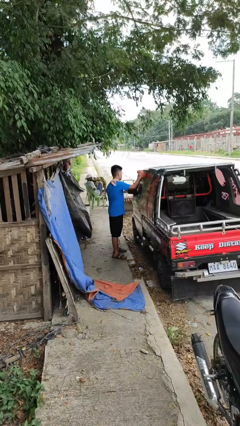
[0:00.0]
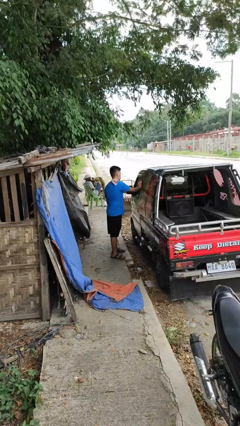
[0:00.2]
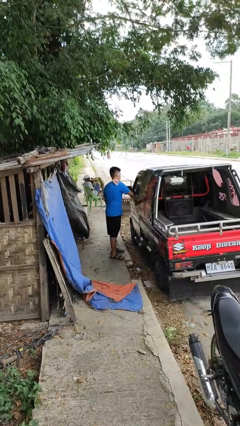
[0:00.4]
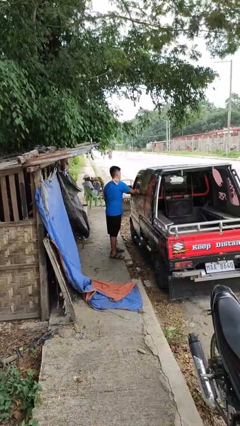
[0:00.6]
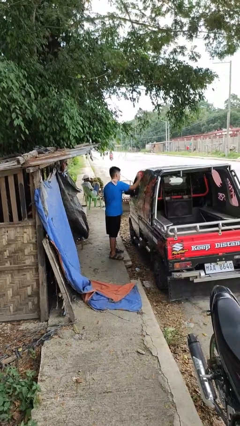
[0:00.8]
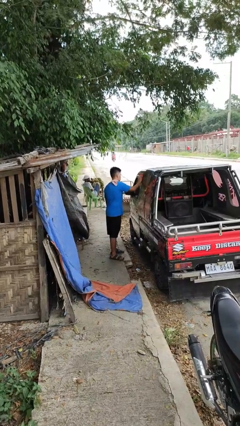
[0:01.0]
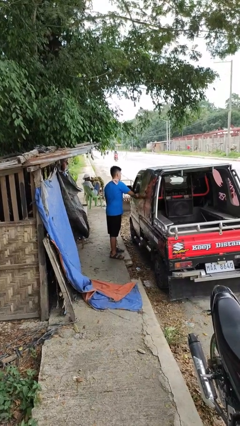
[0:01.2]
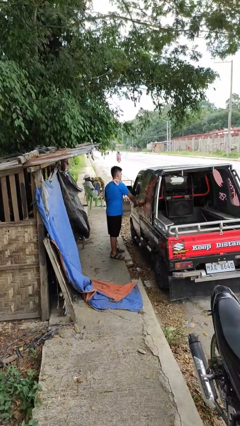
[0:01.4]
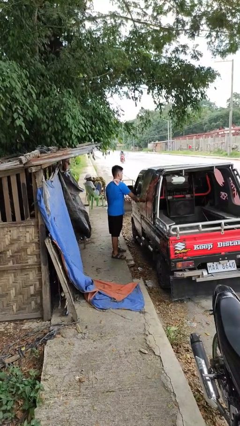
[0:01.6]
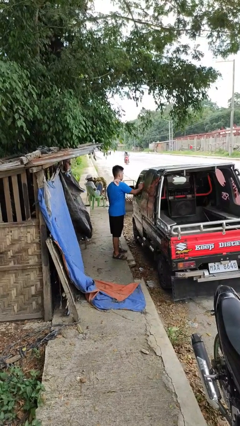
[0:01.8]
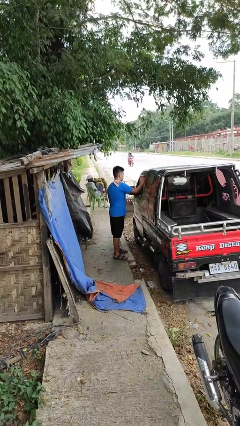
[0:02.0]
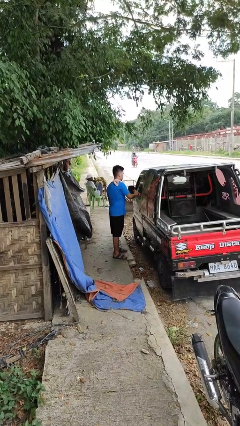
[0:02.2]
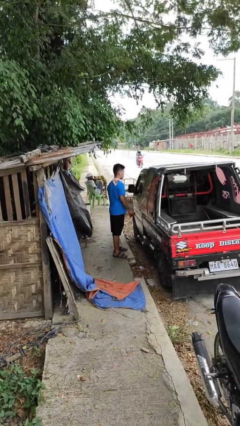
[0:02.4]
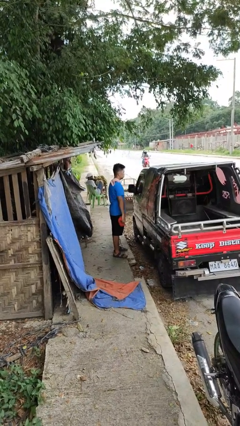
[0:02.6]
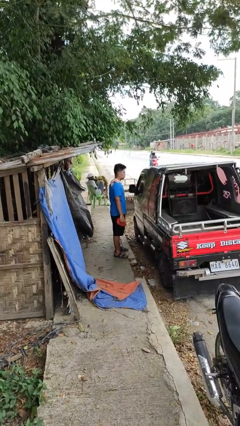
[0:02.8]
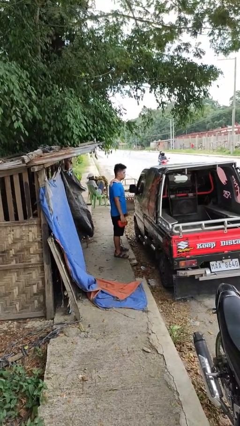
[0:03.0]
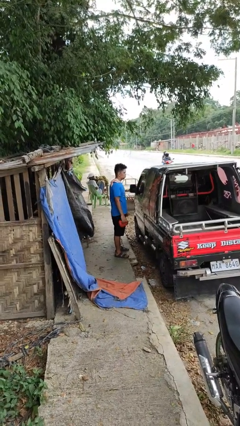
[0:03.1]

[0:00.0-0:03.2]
person polishes car with rag

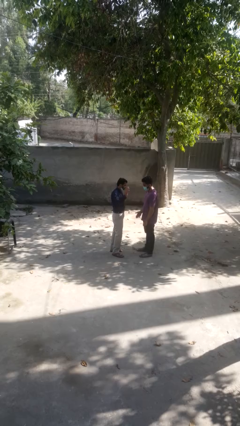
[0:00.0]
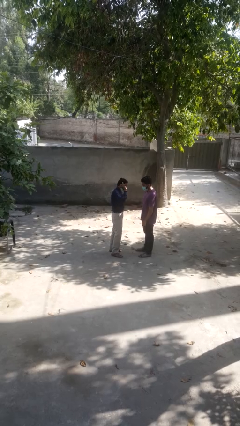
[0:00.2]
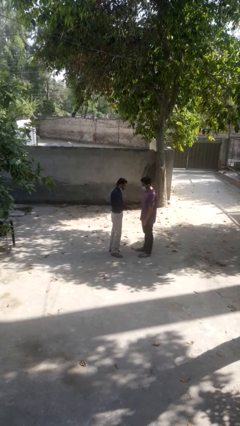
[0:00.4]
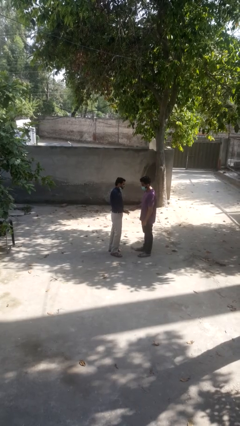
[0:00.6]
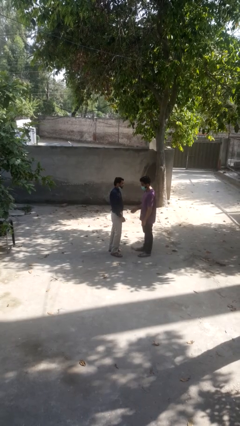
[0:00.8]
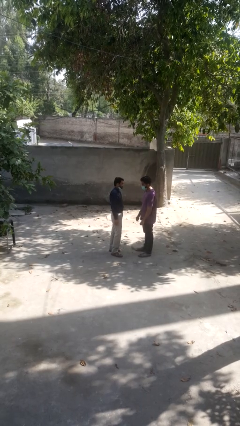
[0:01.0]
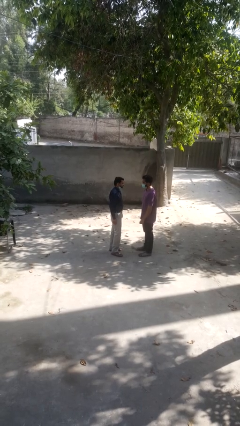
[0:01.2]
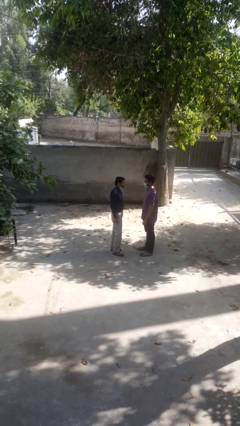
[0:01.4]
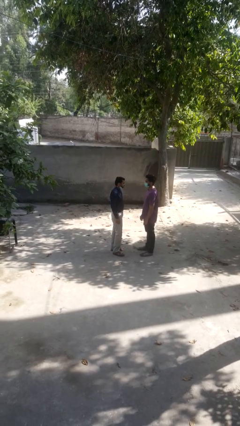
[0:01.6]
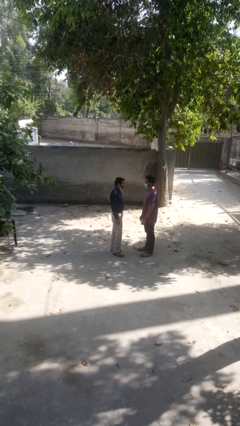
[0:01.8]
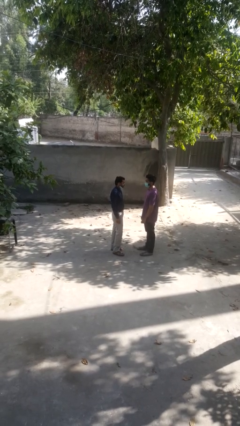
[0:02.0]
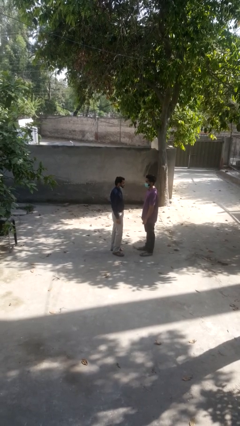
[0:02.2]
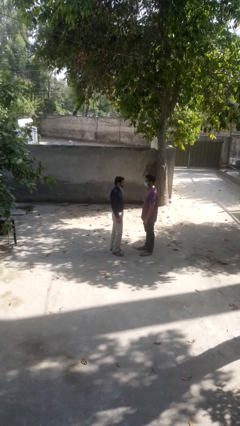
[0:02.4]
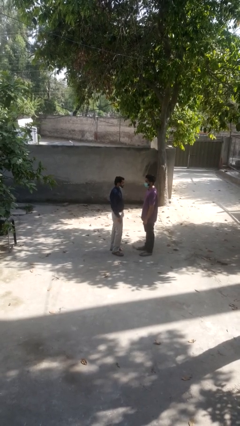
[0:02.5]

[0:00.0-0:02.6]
person highfives hand

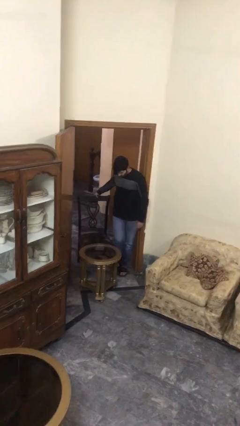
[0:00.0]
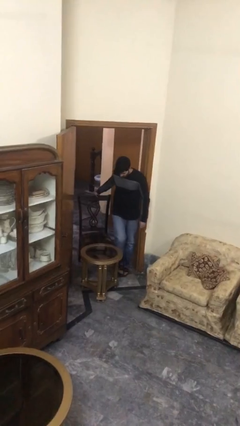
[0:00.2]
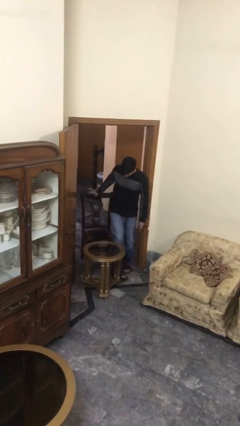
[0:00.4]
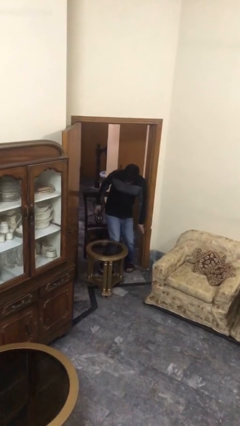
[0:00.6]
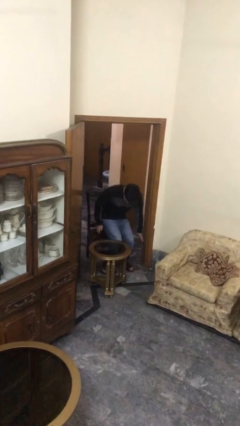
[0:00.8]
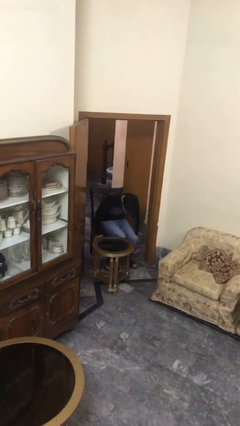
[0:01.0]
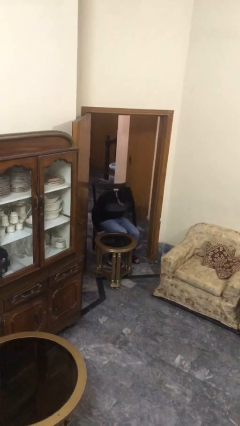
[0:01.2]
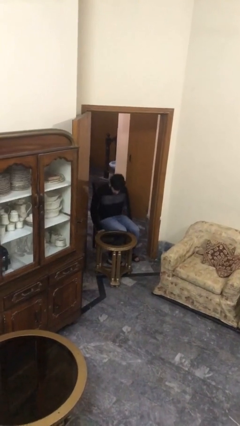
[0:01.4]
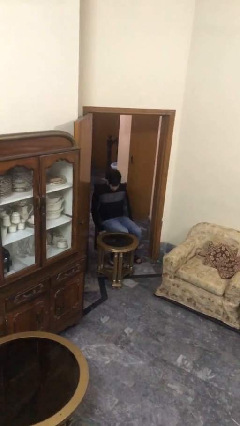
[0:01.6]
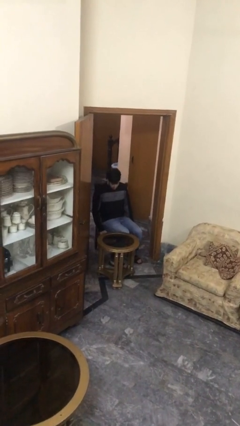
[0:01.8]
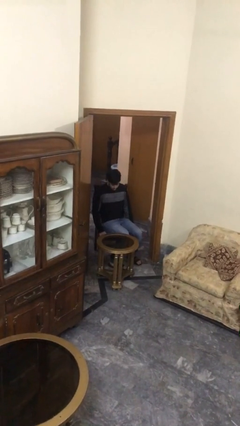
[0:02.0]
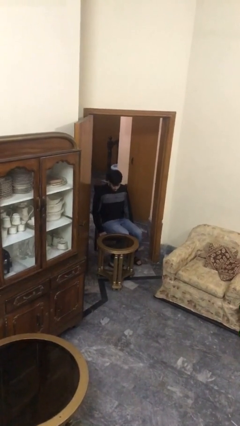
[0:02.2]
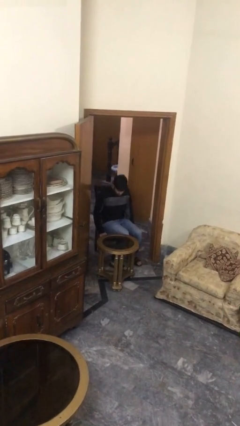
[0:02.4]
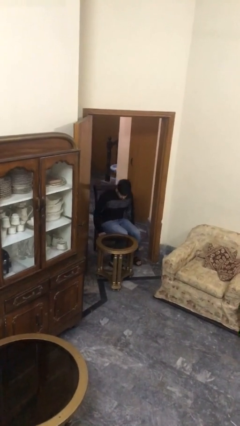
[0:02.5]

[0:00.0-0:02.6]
person sits down

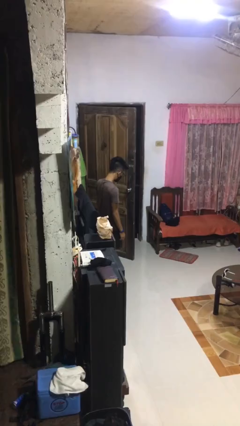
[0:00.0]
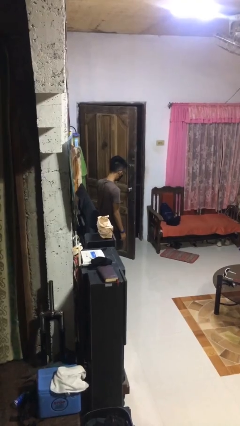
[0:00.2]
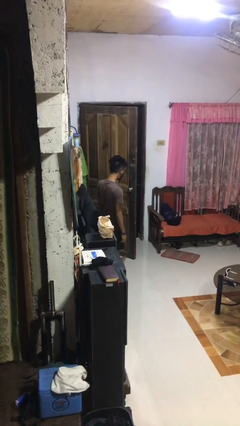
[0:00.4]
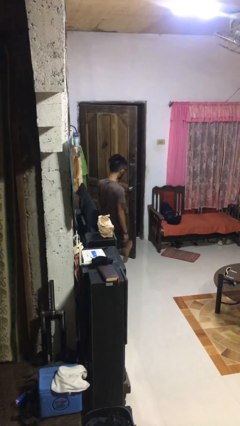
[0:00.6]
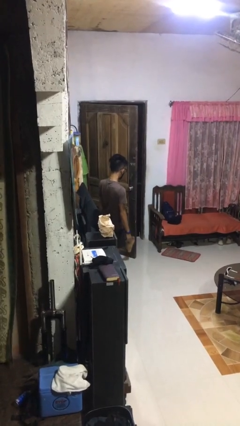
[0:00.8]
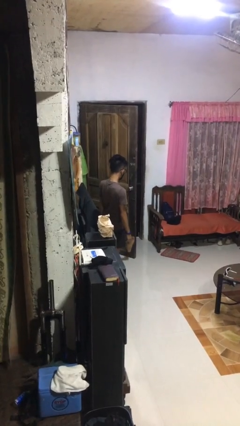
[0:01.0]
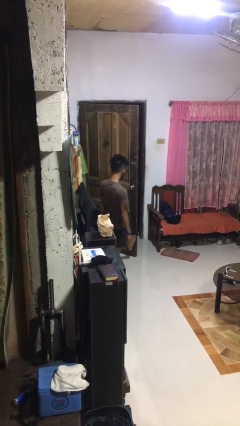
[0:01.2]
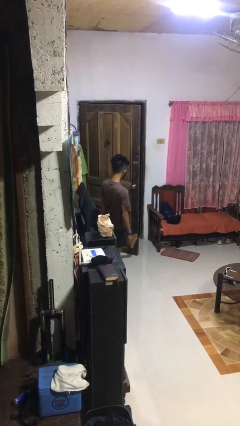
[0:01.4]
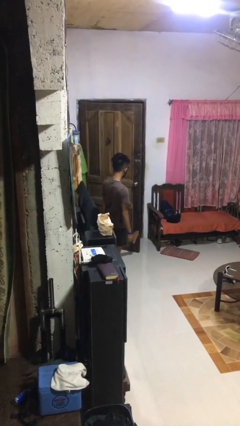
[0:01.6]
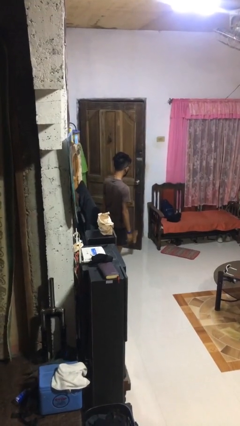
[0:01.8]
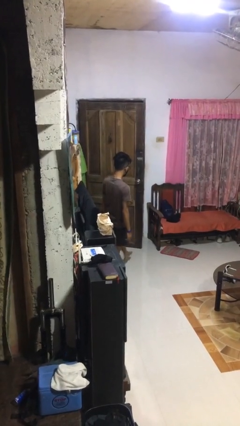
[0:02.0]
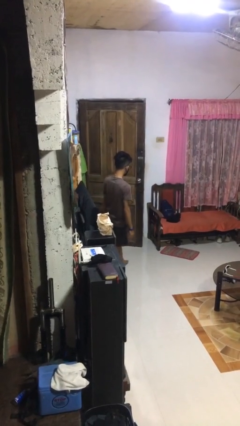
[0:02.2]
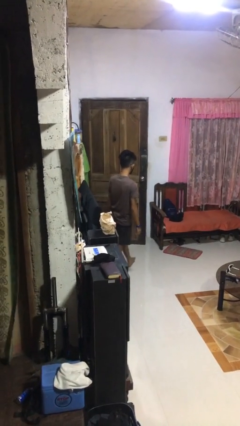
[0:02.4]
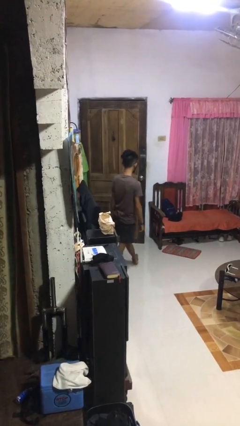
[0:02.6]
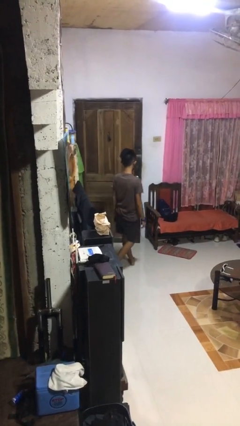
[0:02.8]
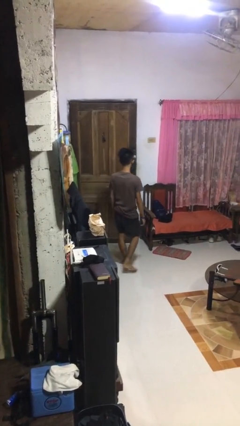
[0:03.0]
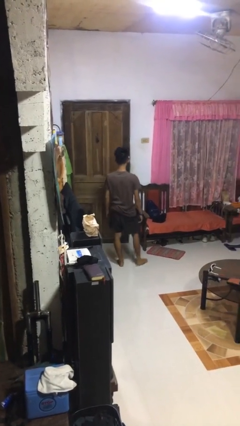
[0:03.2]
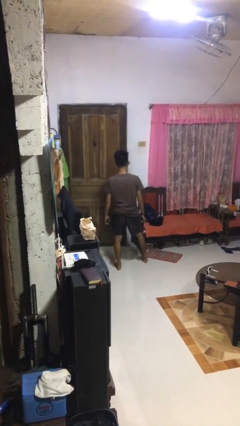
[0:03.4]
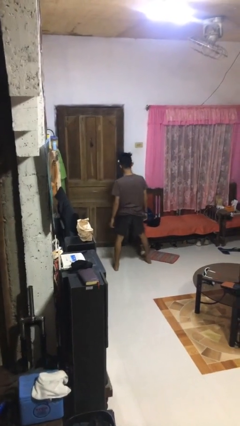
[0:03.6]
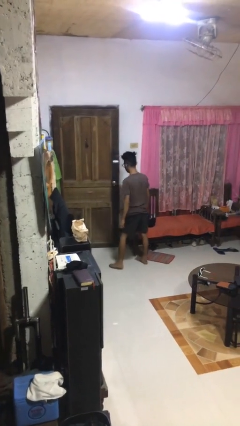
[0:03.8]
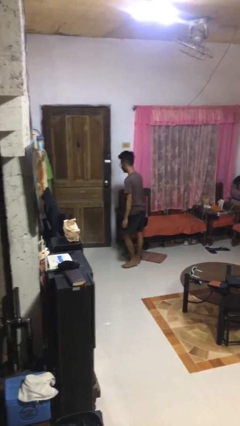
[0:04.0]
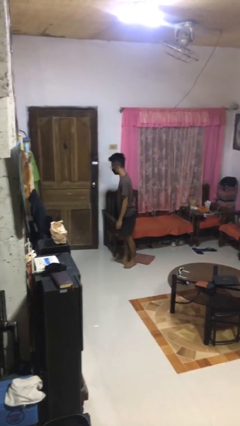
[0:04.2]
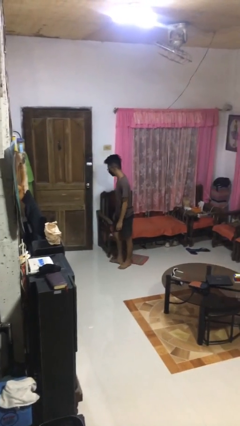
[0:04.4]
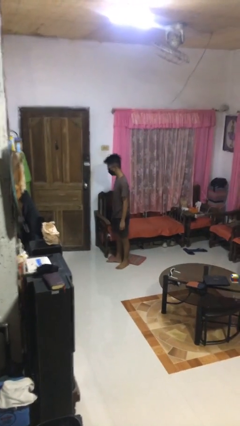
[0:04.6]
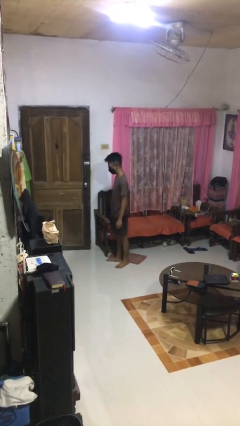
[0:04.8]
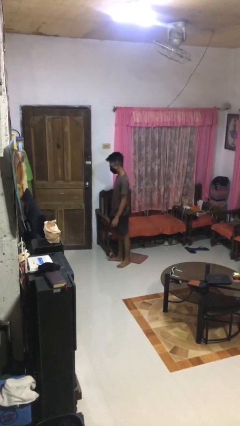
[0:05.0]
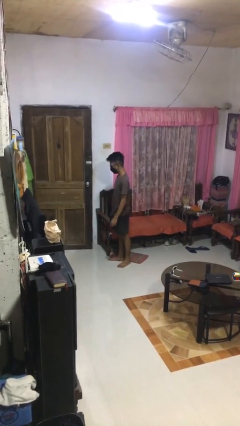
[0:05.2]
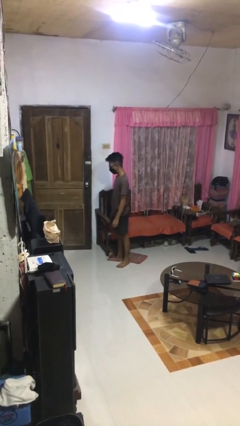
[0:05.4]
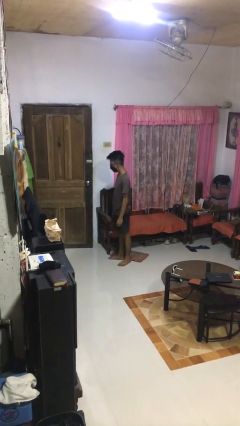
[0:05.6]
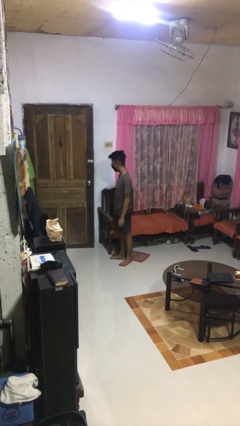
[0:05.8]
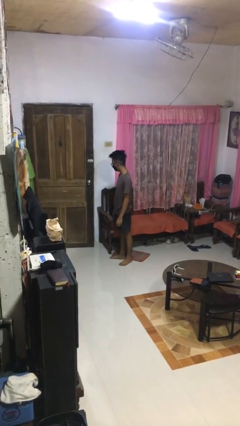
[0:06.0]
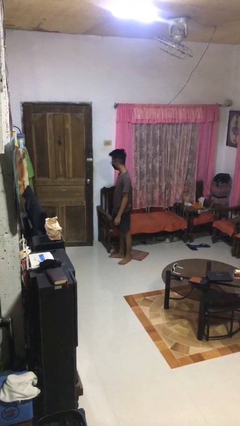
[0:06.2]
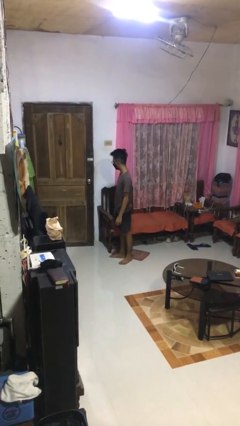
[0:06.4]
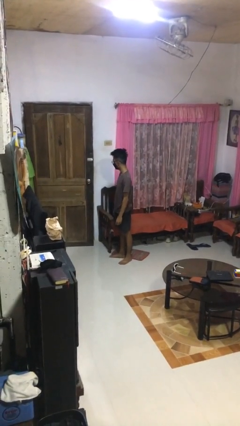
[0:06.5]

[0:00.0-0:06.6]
person closes door with foot

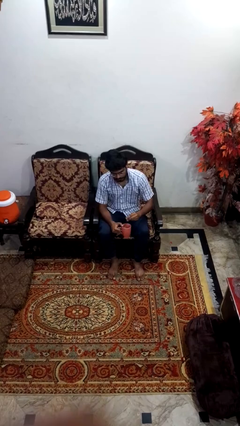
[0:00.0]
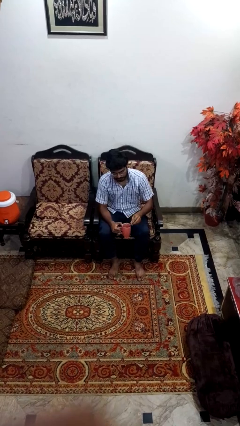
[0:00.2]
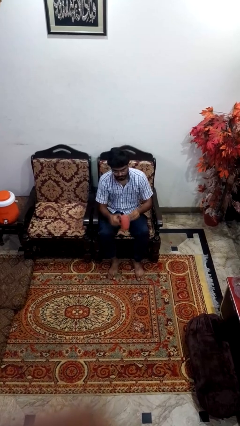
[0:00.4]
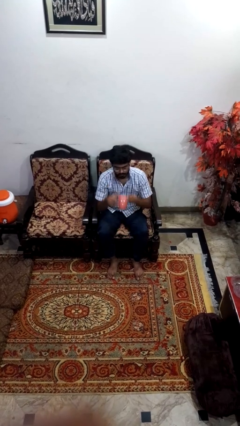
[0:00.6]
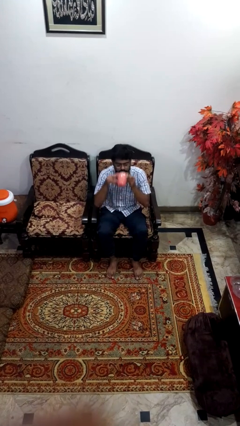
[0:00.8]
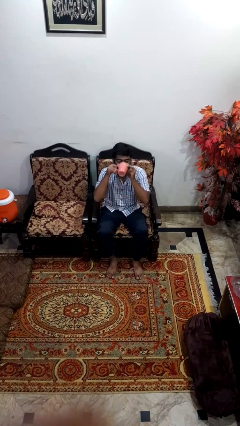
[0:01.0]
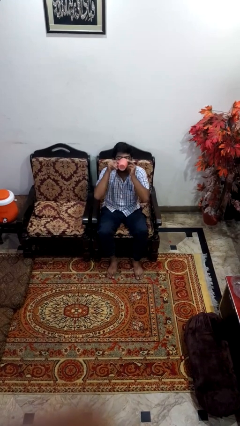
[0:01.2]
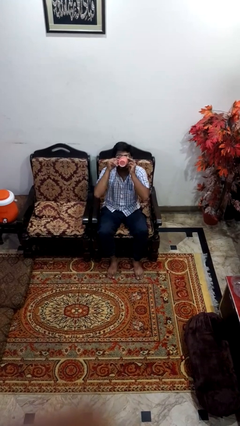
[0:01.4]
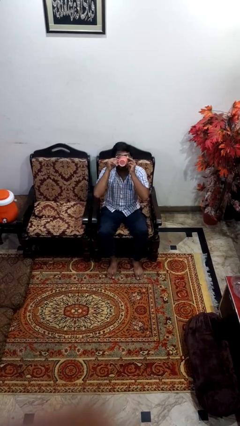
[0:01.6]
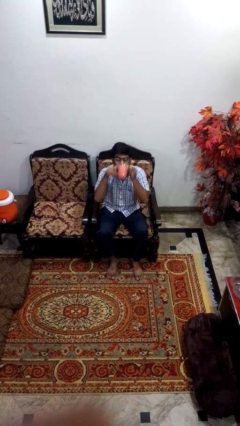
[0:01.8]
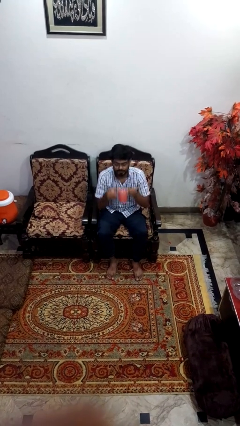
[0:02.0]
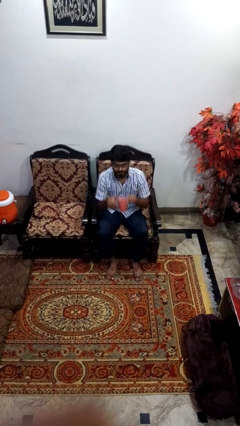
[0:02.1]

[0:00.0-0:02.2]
person drinks from mug
